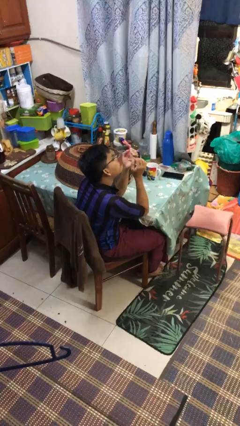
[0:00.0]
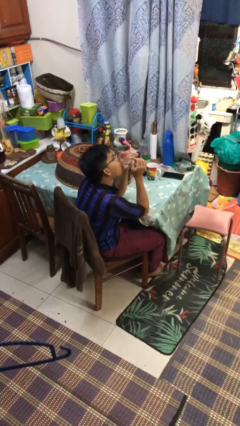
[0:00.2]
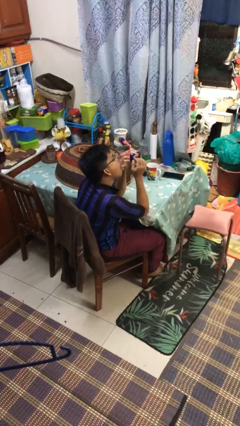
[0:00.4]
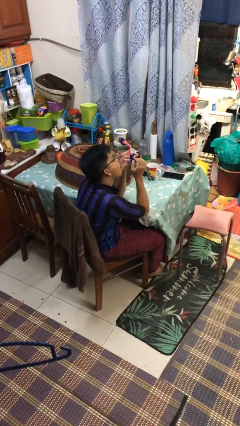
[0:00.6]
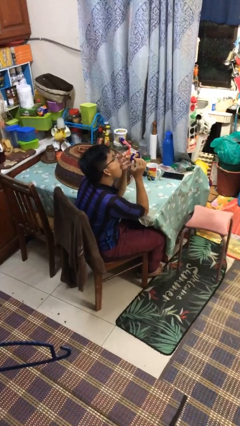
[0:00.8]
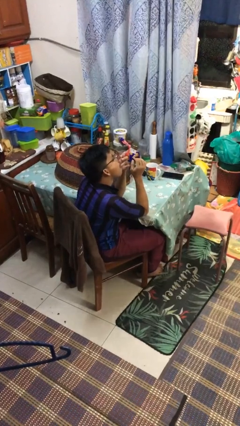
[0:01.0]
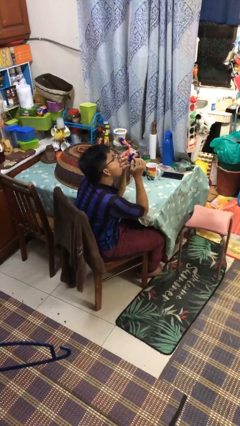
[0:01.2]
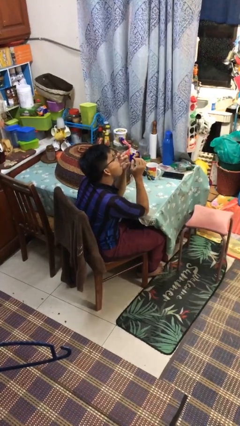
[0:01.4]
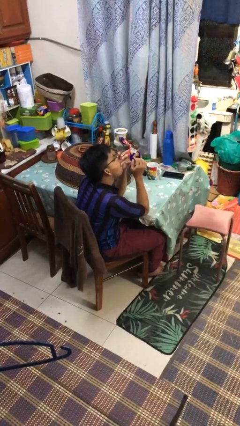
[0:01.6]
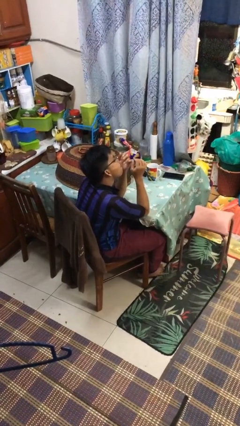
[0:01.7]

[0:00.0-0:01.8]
person licks fingers

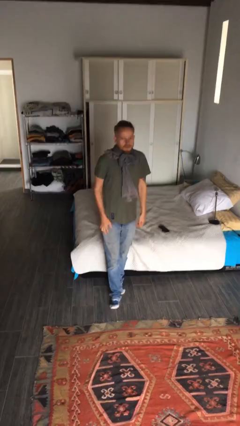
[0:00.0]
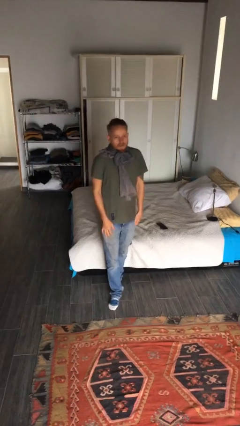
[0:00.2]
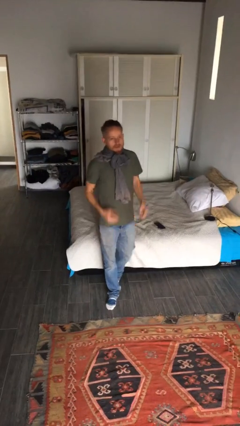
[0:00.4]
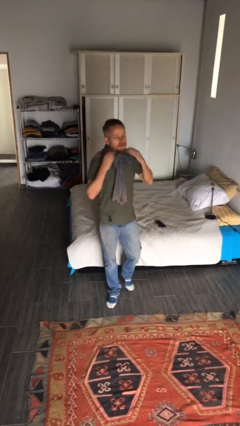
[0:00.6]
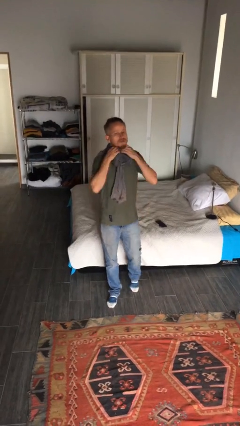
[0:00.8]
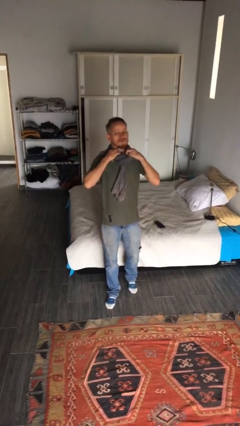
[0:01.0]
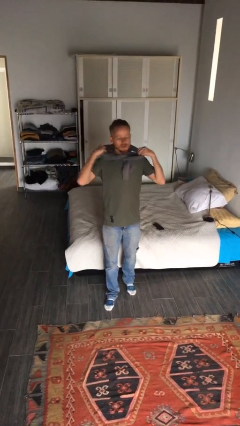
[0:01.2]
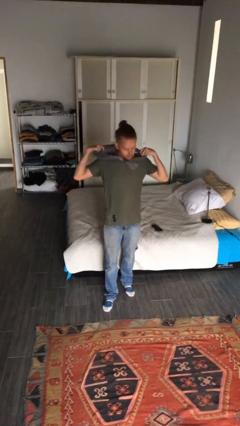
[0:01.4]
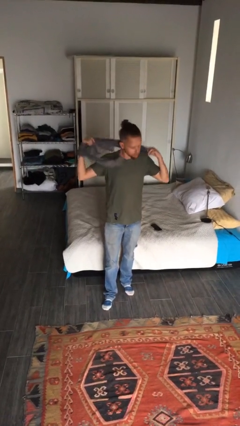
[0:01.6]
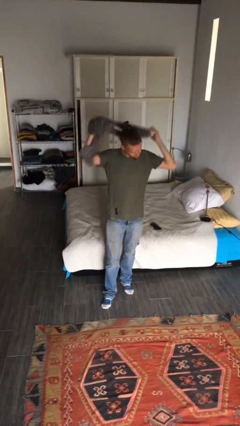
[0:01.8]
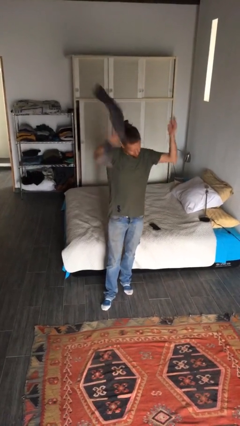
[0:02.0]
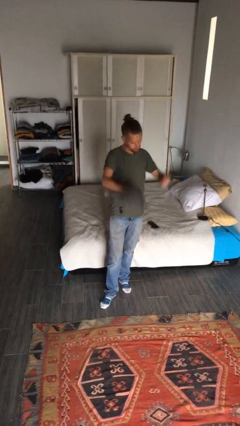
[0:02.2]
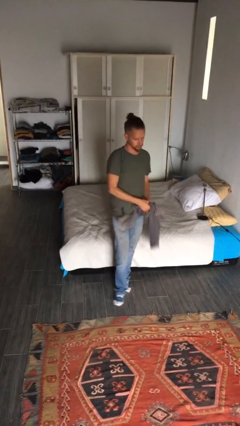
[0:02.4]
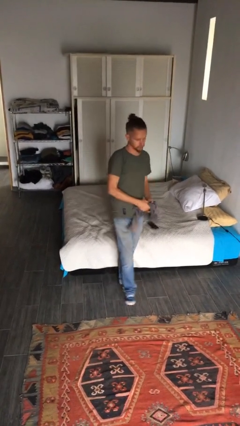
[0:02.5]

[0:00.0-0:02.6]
person takes off scarf

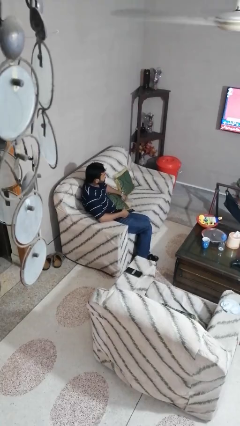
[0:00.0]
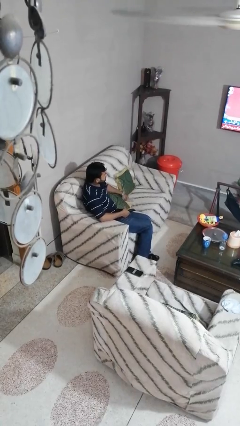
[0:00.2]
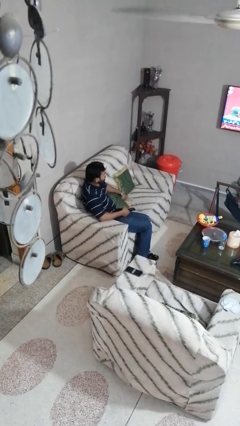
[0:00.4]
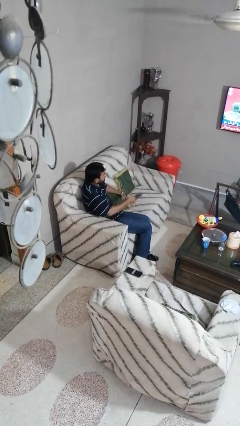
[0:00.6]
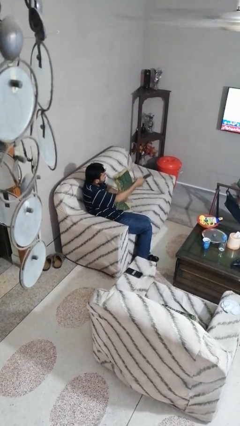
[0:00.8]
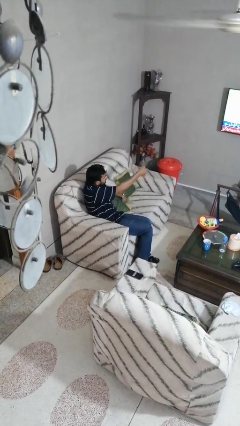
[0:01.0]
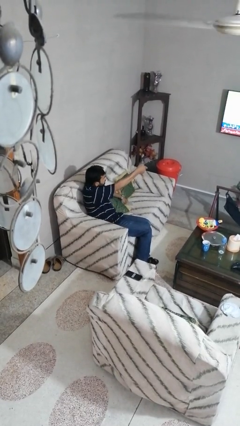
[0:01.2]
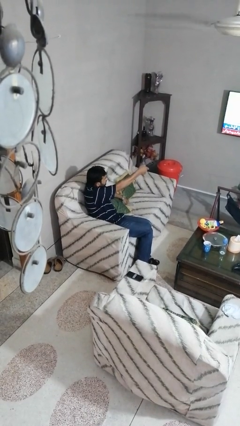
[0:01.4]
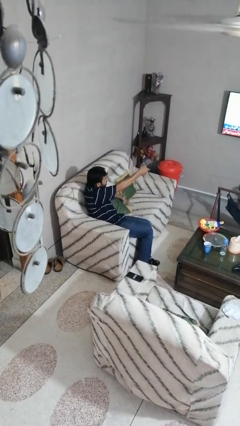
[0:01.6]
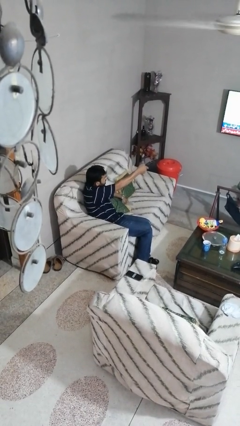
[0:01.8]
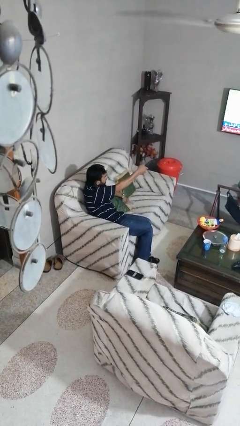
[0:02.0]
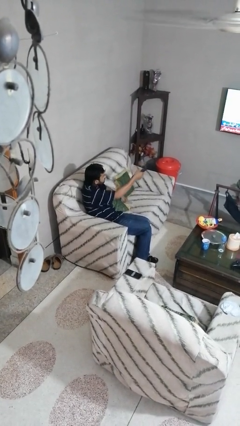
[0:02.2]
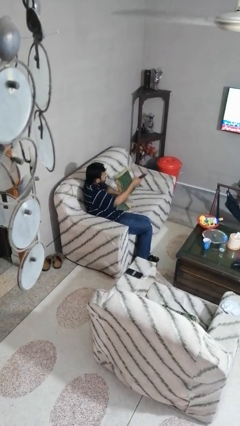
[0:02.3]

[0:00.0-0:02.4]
person uses television remote

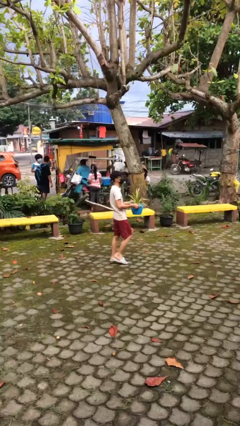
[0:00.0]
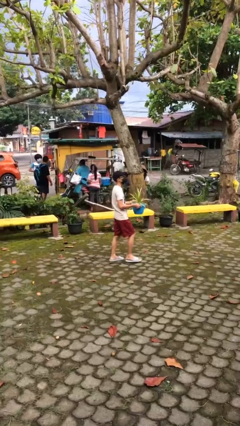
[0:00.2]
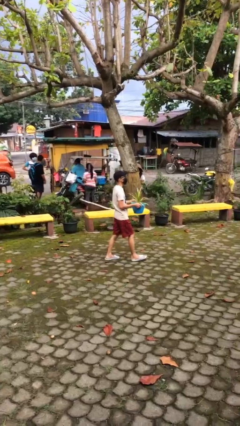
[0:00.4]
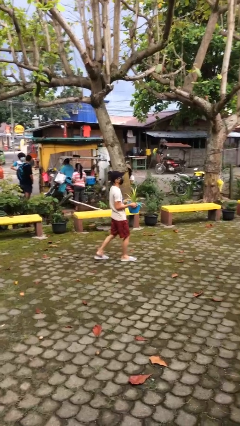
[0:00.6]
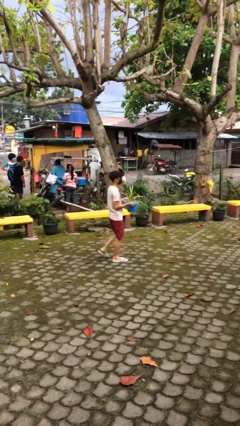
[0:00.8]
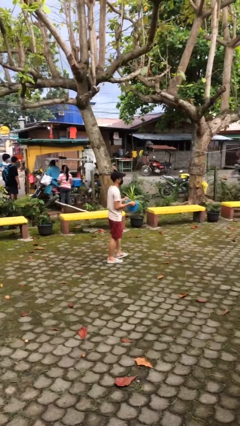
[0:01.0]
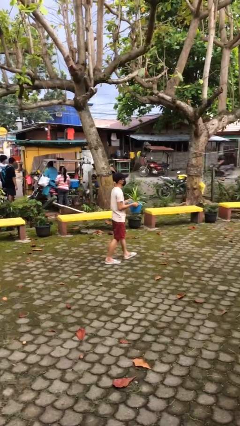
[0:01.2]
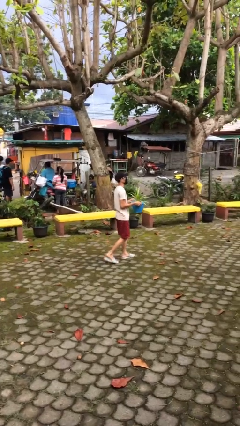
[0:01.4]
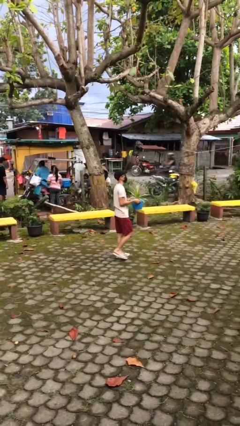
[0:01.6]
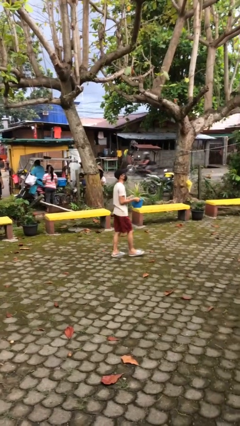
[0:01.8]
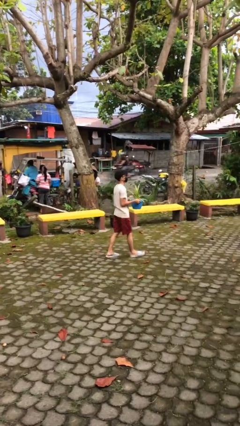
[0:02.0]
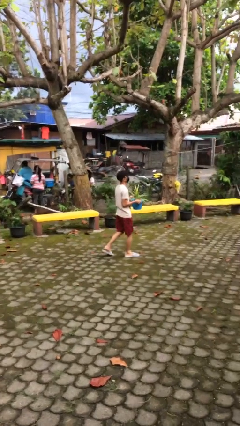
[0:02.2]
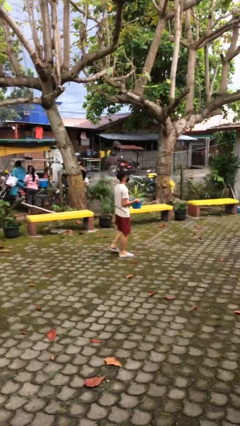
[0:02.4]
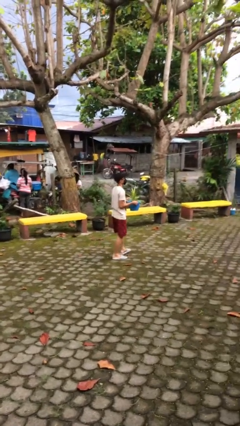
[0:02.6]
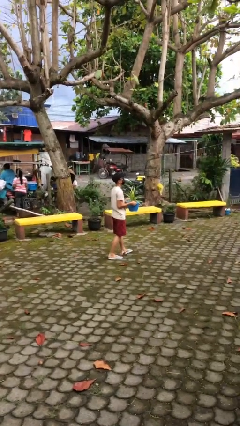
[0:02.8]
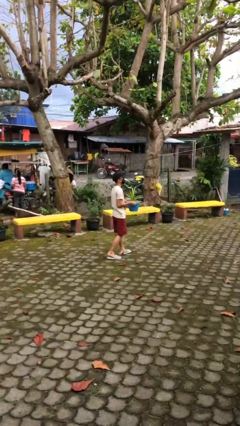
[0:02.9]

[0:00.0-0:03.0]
person carries heavy object

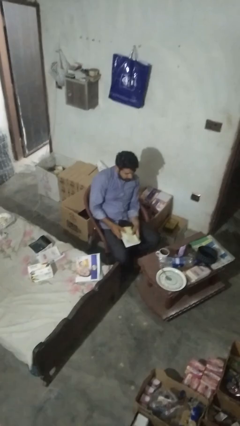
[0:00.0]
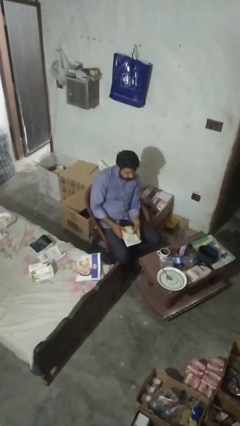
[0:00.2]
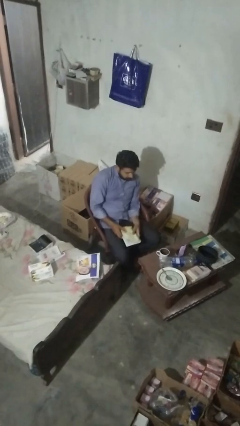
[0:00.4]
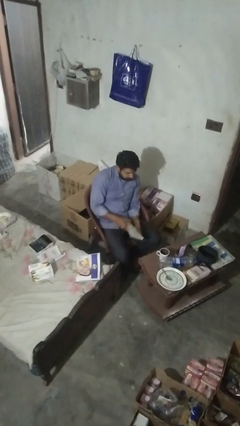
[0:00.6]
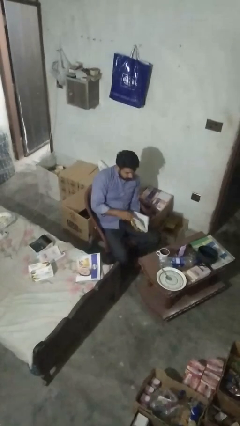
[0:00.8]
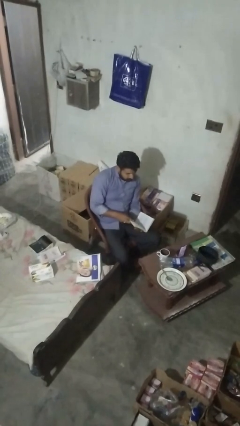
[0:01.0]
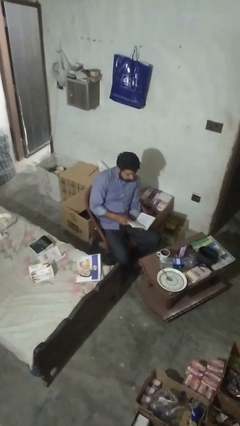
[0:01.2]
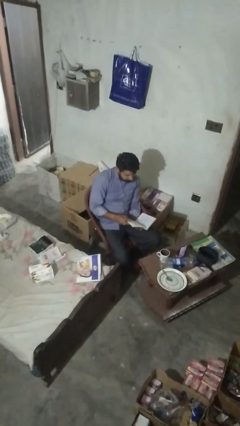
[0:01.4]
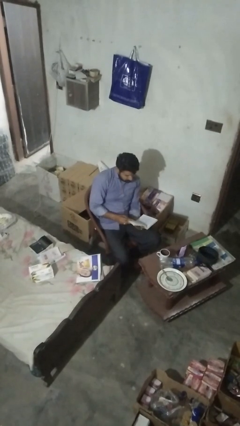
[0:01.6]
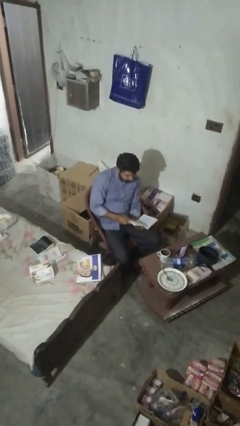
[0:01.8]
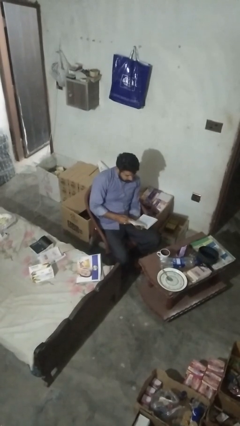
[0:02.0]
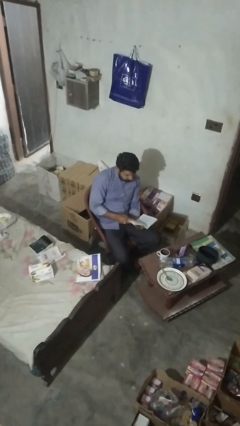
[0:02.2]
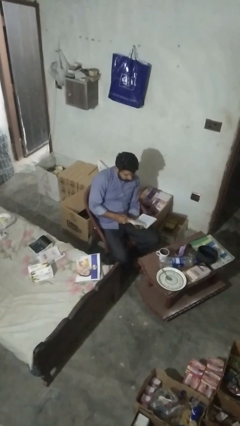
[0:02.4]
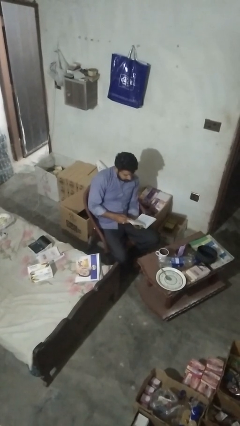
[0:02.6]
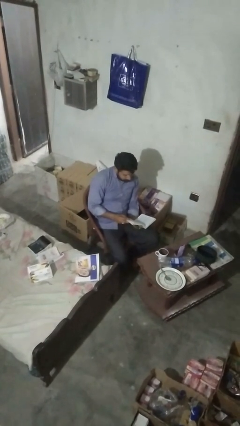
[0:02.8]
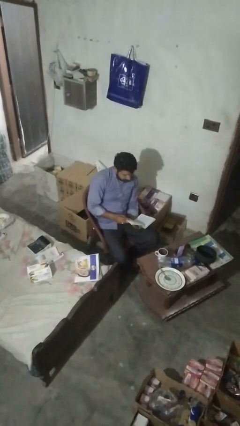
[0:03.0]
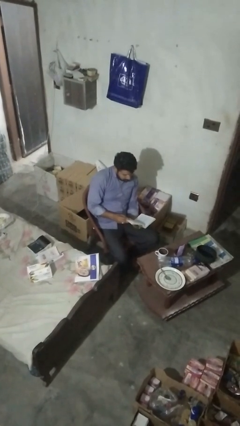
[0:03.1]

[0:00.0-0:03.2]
person reads book

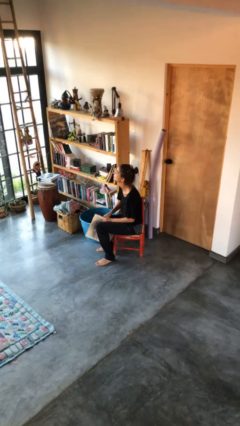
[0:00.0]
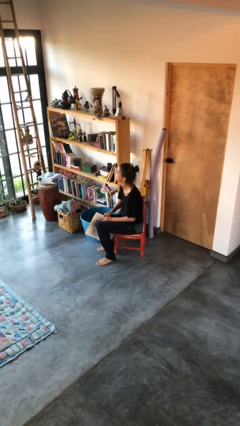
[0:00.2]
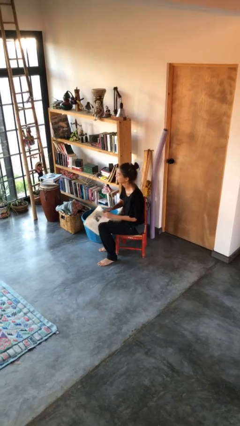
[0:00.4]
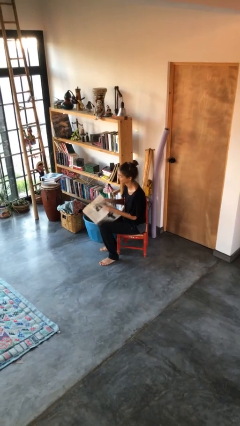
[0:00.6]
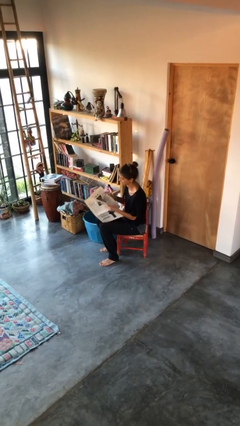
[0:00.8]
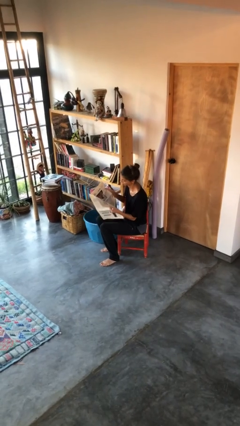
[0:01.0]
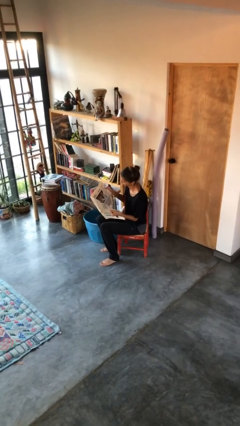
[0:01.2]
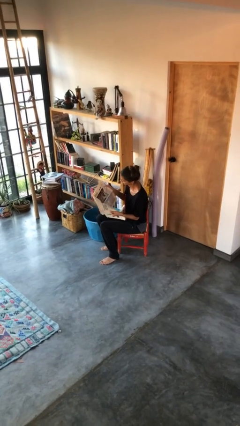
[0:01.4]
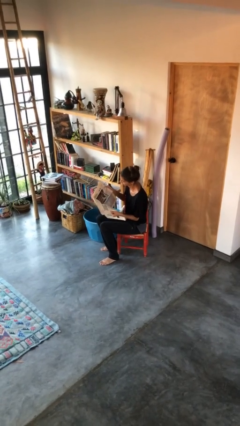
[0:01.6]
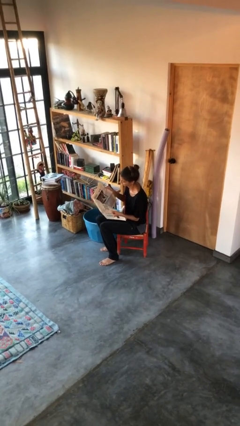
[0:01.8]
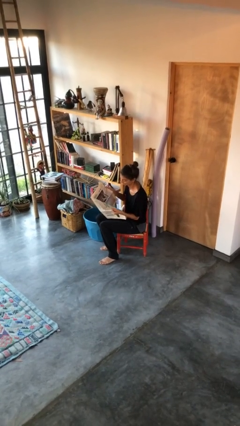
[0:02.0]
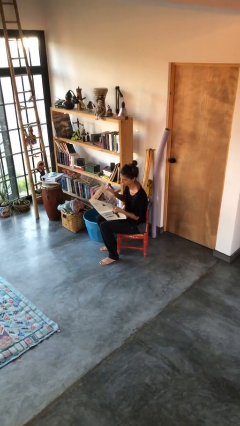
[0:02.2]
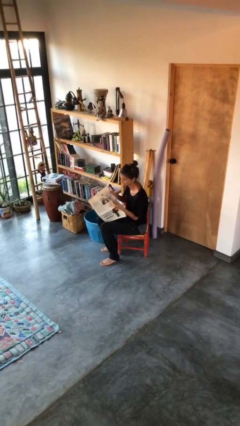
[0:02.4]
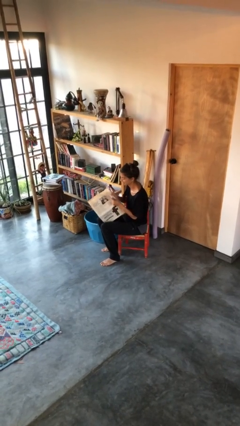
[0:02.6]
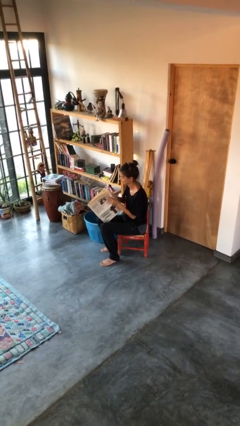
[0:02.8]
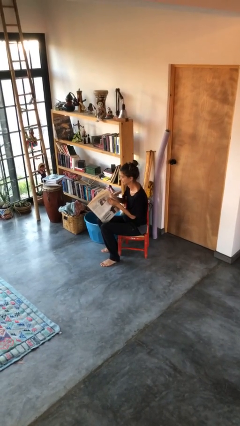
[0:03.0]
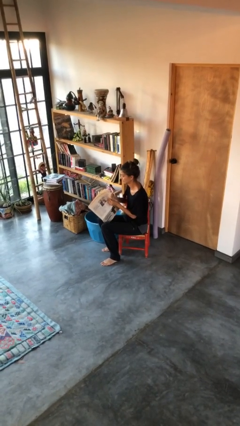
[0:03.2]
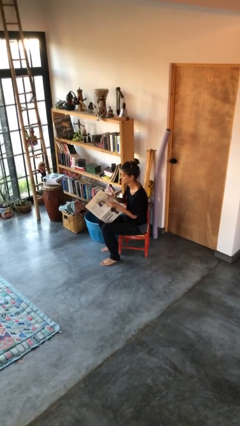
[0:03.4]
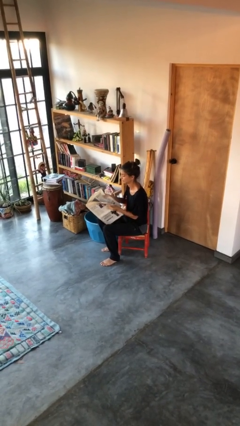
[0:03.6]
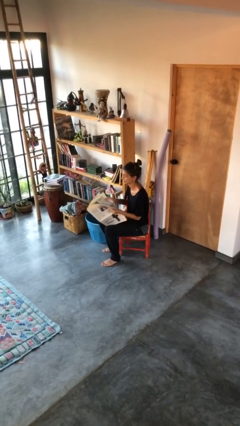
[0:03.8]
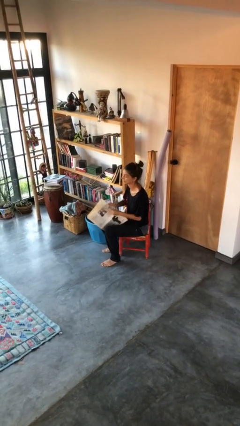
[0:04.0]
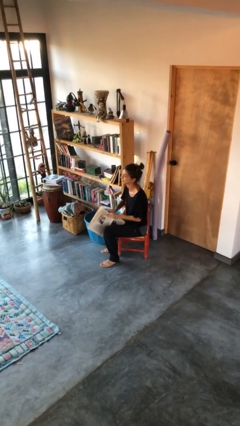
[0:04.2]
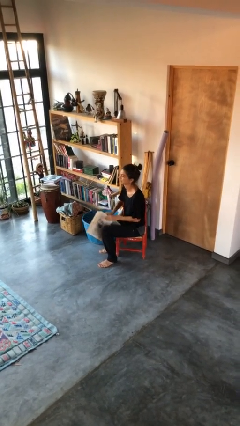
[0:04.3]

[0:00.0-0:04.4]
person reads newspaper
